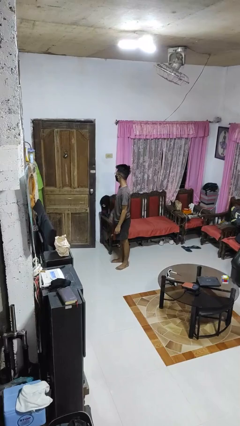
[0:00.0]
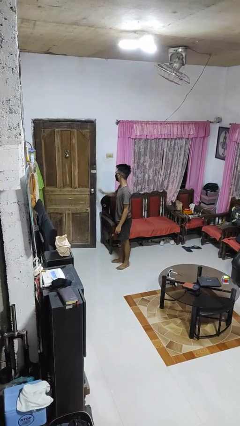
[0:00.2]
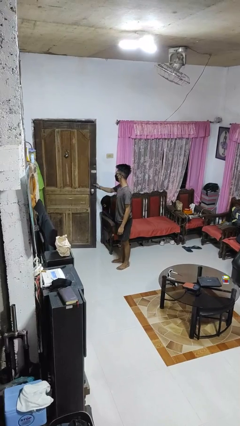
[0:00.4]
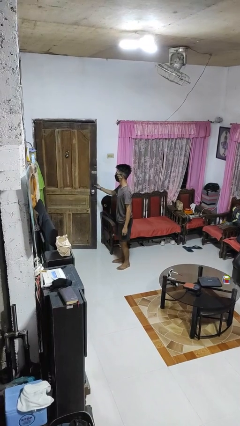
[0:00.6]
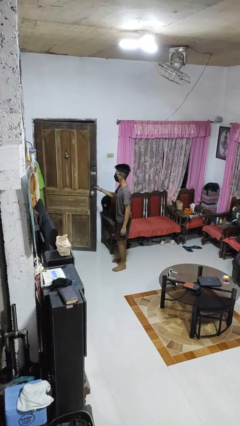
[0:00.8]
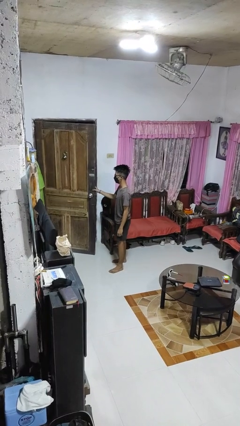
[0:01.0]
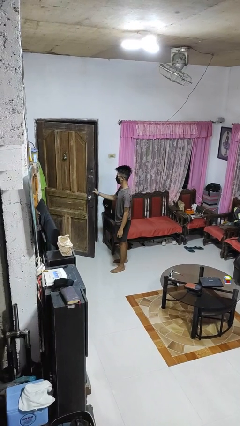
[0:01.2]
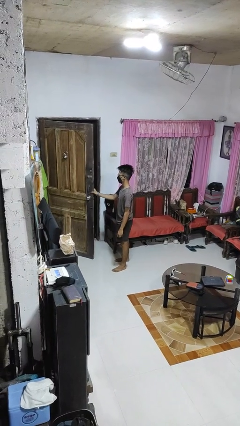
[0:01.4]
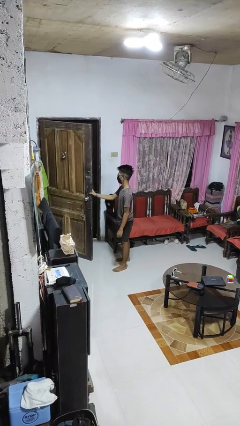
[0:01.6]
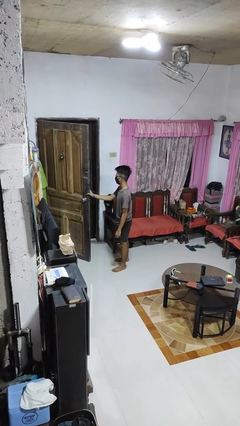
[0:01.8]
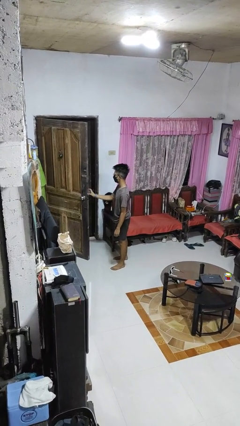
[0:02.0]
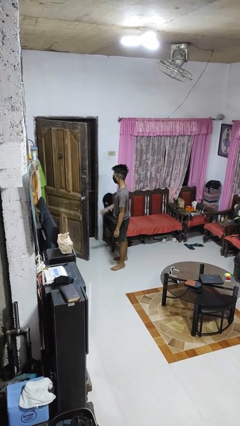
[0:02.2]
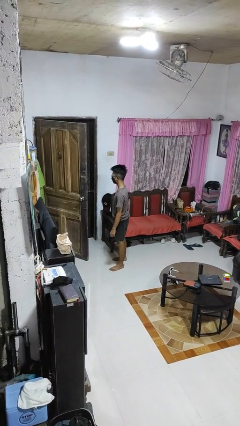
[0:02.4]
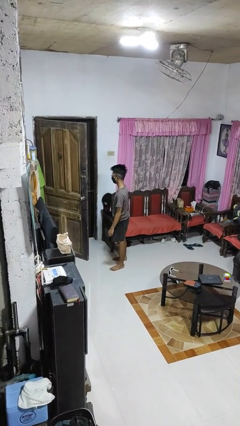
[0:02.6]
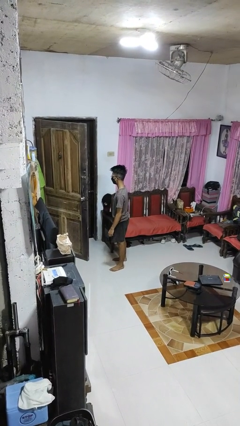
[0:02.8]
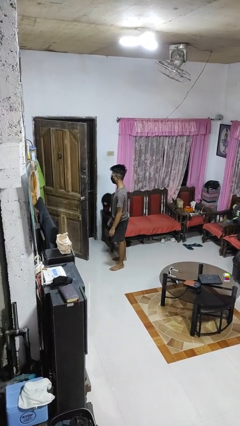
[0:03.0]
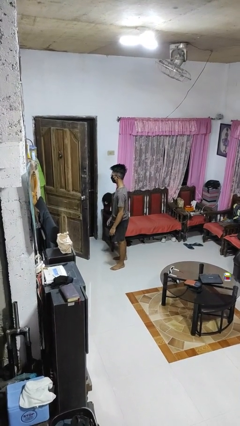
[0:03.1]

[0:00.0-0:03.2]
person opens facility door

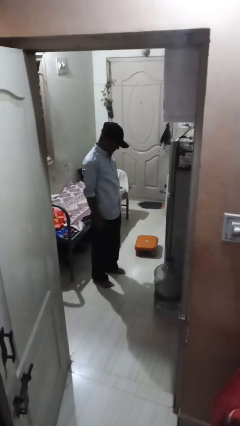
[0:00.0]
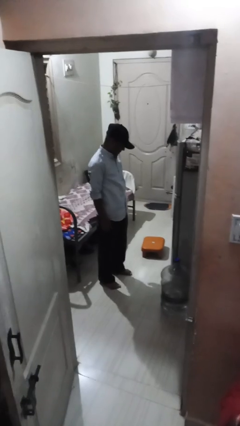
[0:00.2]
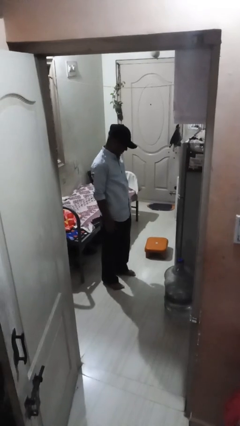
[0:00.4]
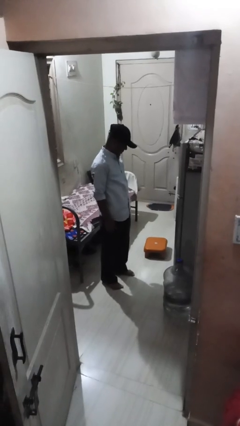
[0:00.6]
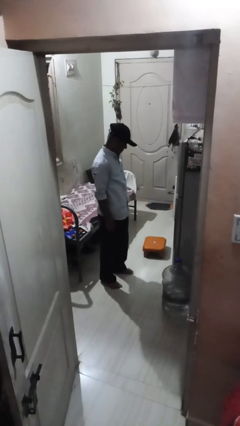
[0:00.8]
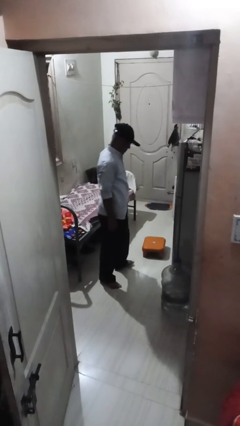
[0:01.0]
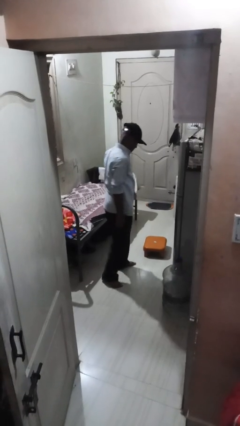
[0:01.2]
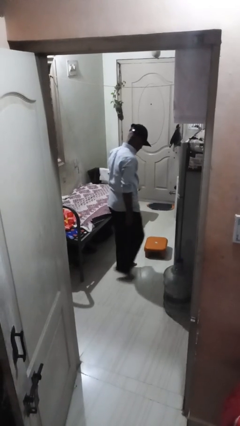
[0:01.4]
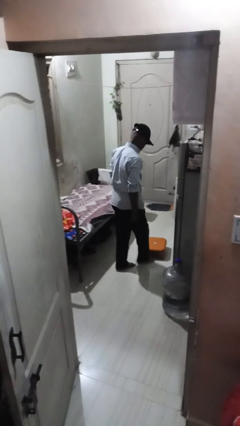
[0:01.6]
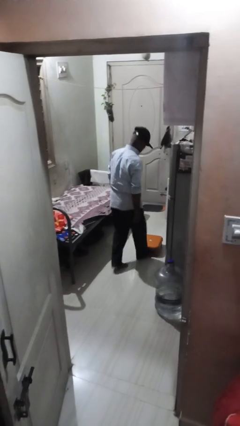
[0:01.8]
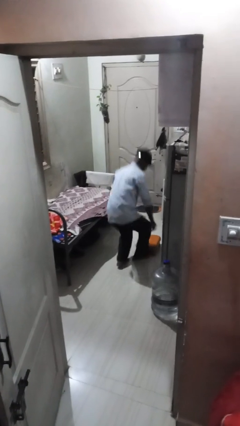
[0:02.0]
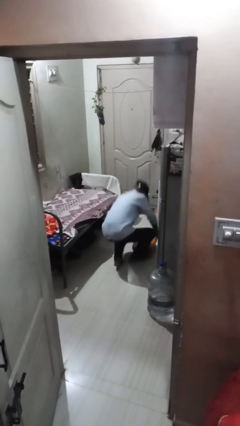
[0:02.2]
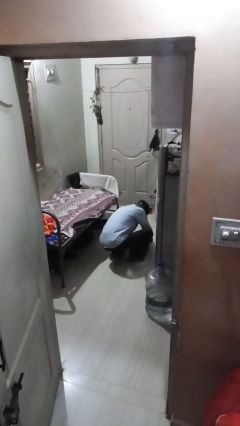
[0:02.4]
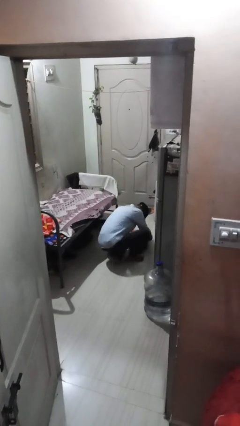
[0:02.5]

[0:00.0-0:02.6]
person trips on object on floor

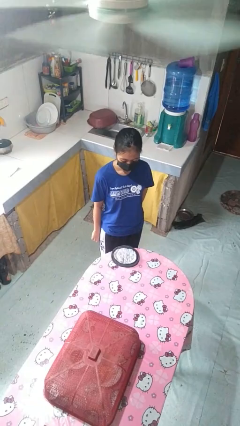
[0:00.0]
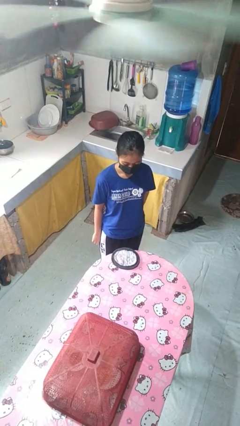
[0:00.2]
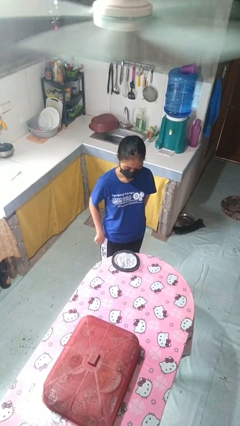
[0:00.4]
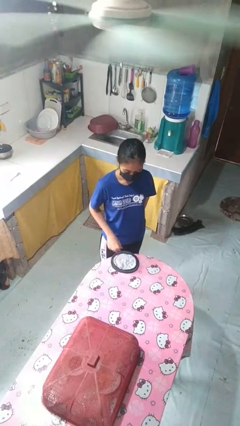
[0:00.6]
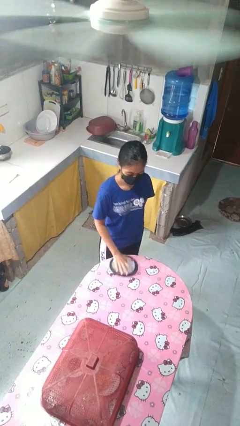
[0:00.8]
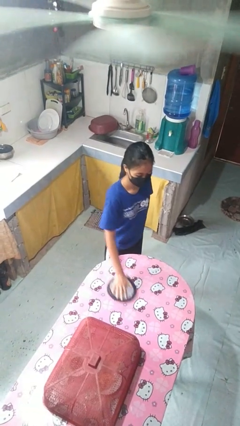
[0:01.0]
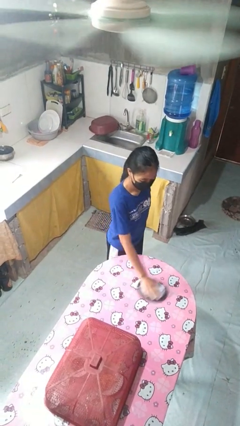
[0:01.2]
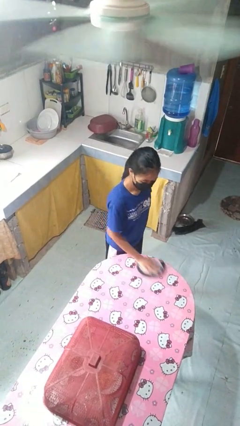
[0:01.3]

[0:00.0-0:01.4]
person cleans table with rag

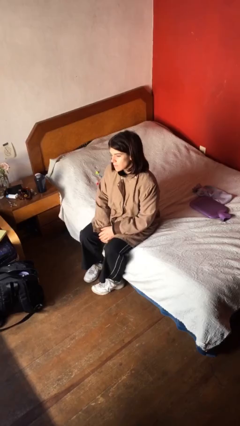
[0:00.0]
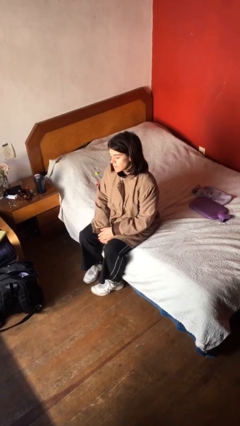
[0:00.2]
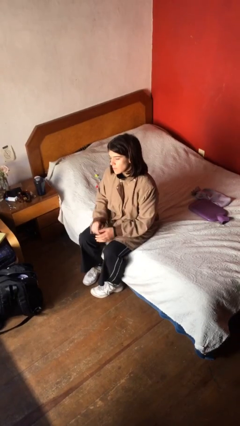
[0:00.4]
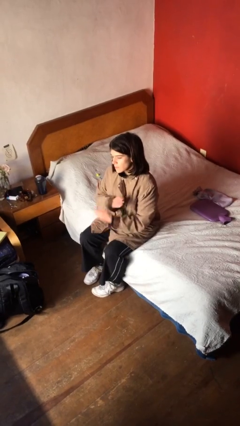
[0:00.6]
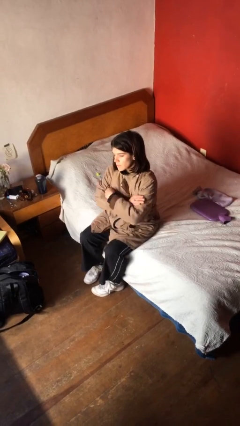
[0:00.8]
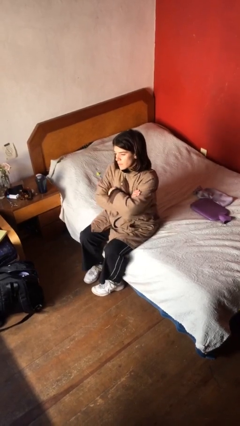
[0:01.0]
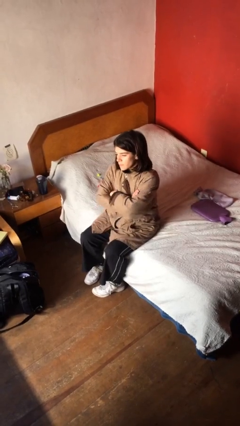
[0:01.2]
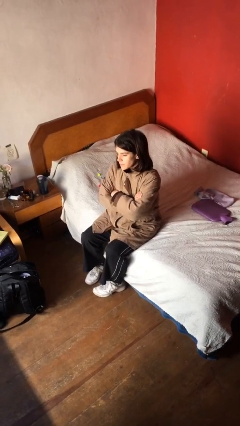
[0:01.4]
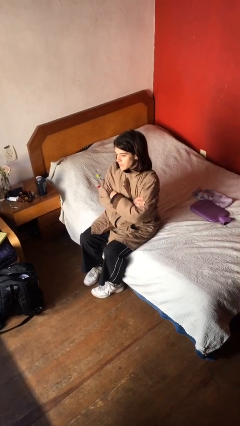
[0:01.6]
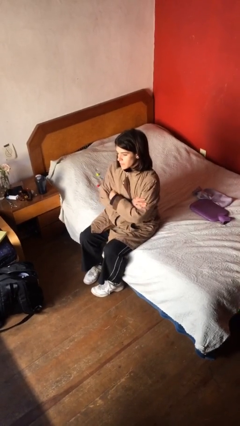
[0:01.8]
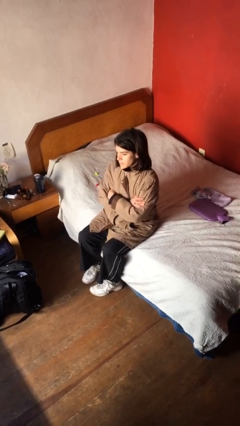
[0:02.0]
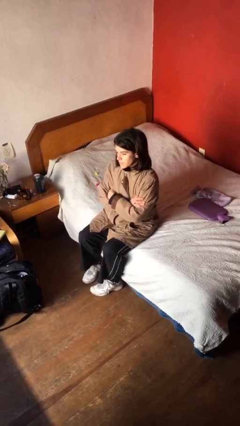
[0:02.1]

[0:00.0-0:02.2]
person crosses arms

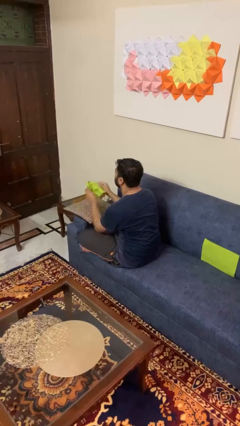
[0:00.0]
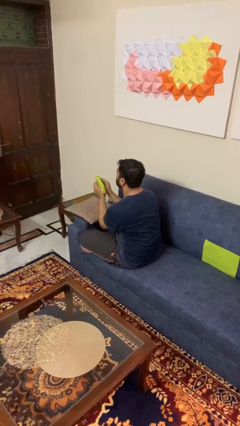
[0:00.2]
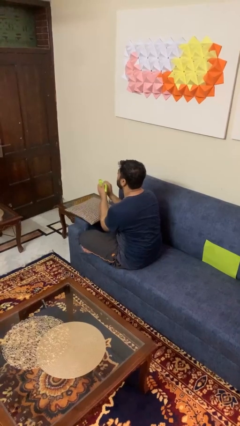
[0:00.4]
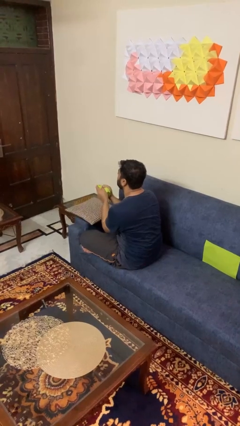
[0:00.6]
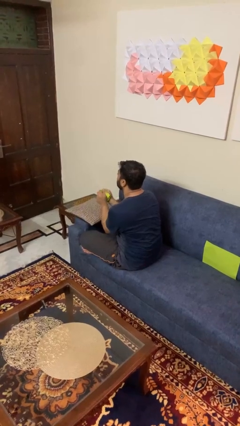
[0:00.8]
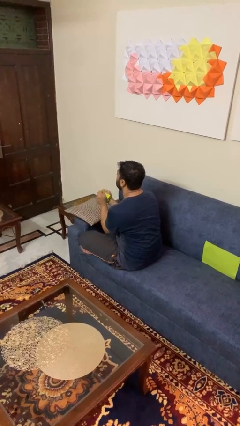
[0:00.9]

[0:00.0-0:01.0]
person crumples paper

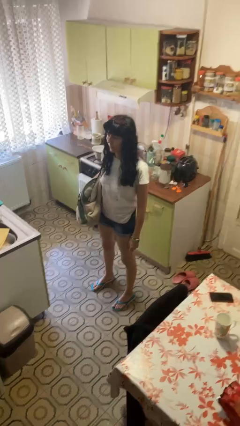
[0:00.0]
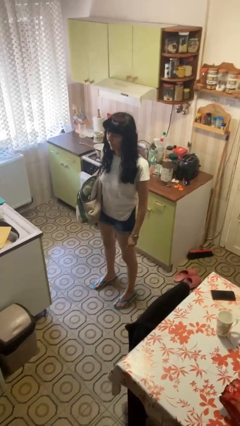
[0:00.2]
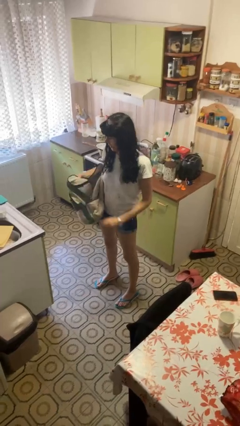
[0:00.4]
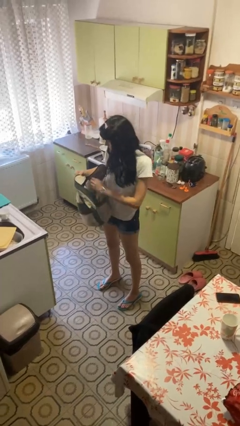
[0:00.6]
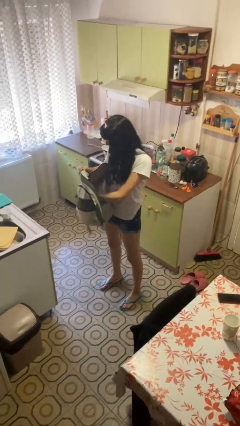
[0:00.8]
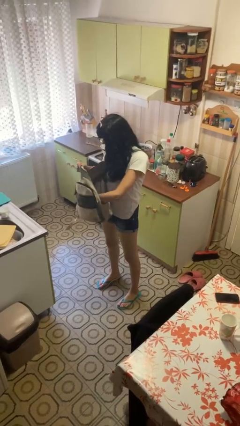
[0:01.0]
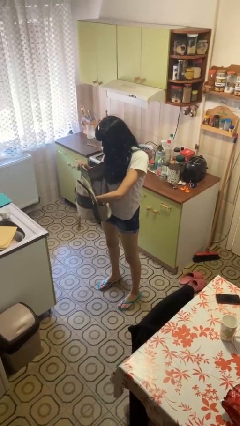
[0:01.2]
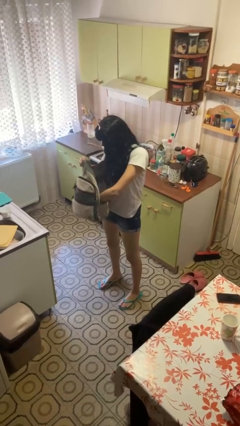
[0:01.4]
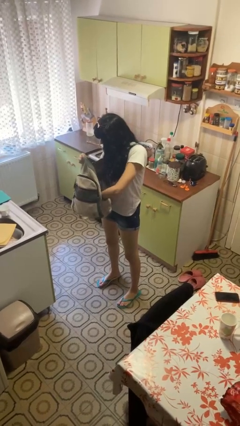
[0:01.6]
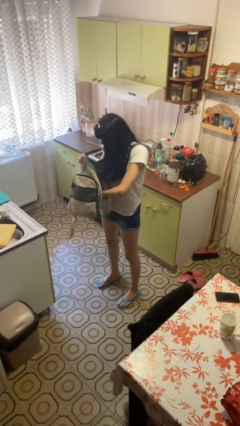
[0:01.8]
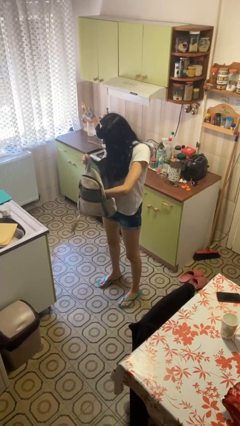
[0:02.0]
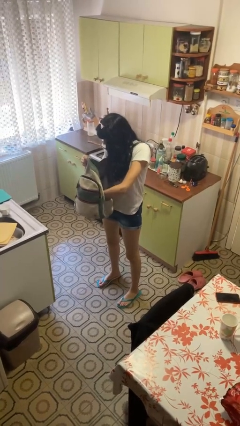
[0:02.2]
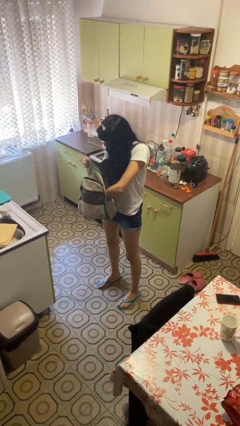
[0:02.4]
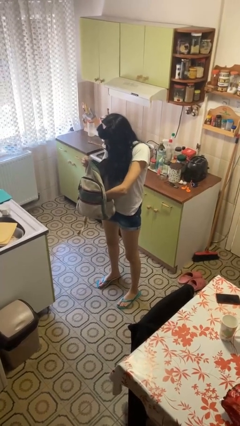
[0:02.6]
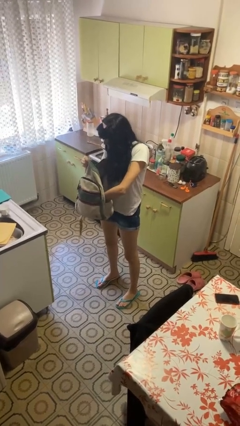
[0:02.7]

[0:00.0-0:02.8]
person searches in backpack

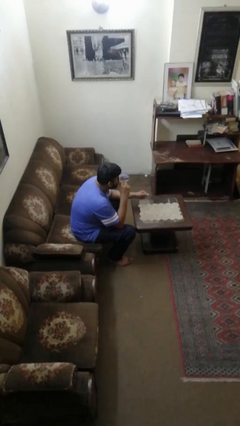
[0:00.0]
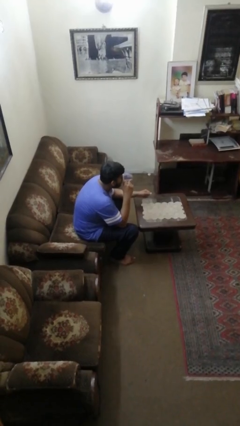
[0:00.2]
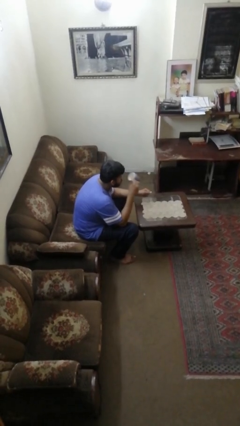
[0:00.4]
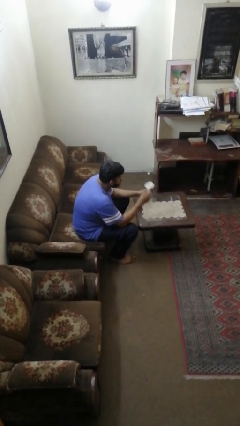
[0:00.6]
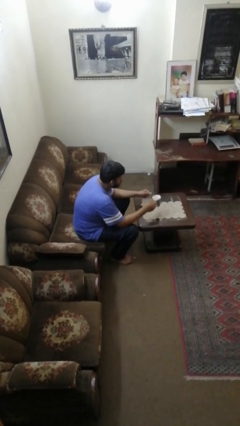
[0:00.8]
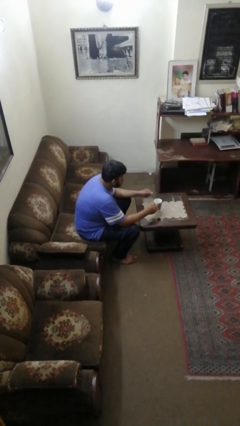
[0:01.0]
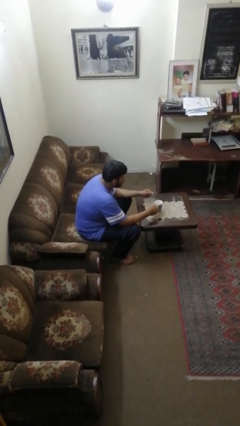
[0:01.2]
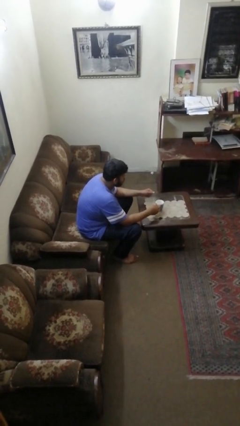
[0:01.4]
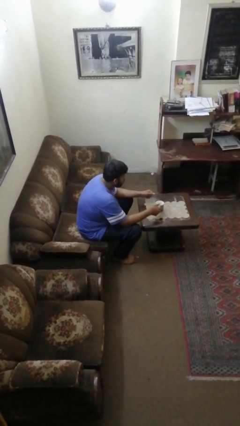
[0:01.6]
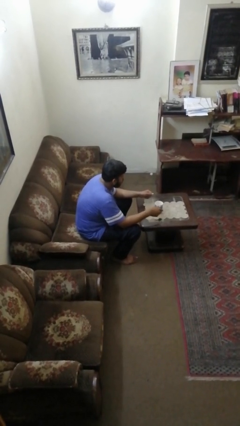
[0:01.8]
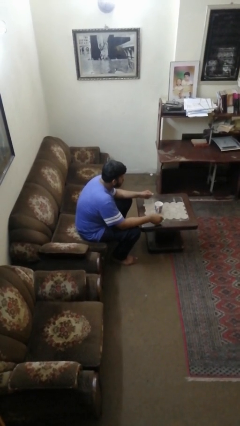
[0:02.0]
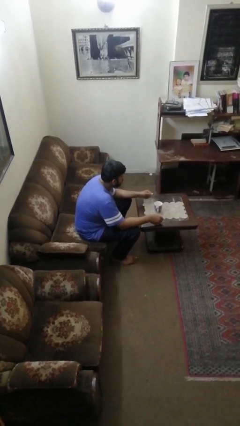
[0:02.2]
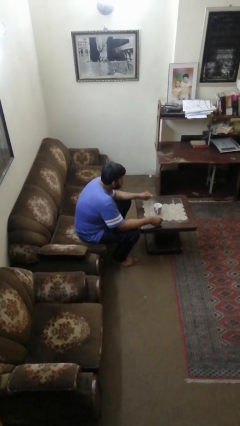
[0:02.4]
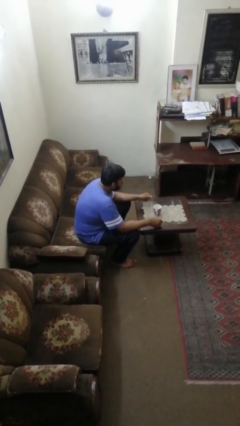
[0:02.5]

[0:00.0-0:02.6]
person puts down object on table

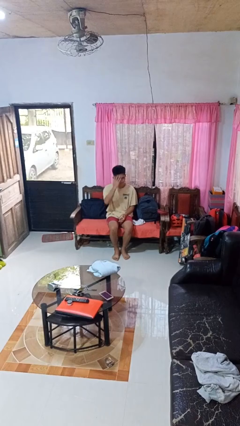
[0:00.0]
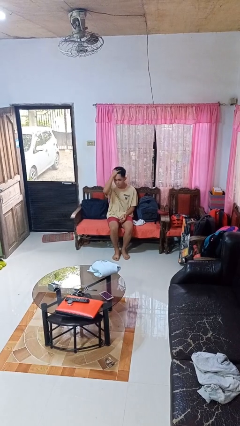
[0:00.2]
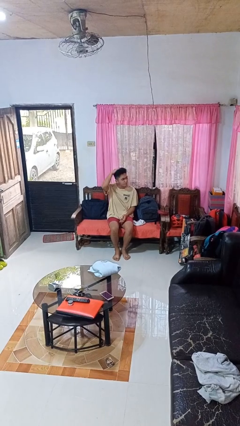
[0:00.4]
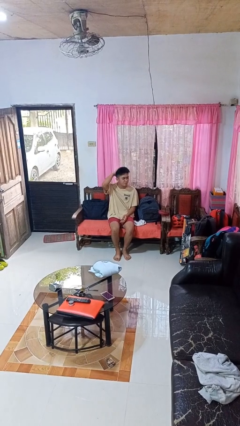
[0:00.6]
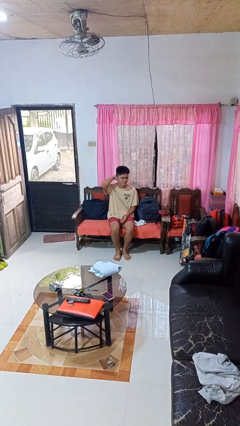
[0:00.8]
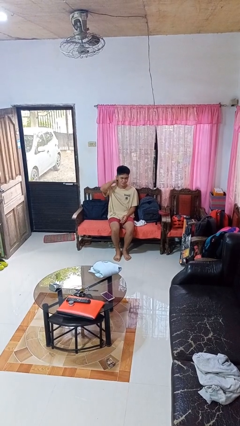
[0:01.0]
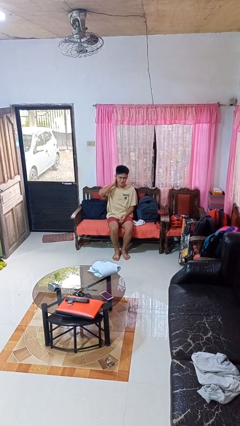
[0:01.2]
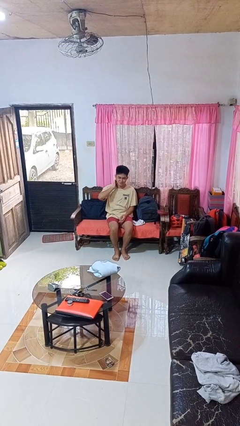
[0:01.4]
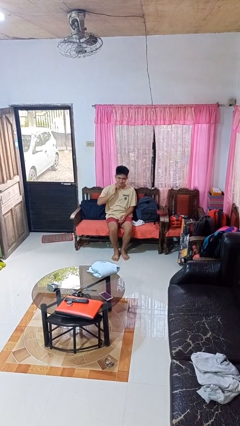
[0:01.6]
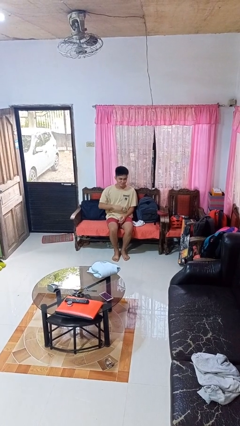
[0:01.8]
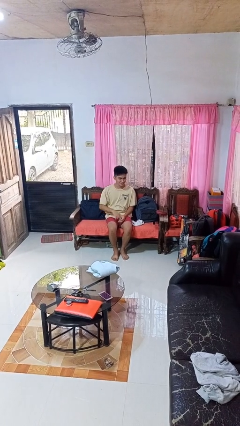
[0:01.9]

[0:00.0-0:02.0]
person strokes hair
